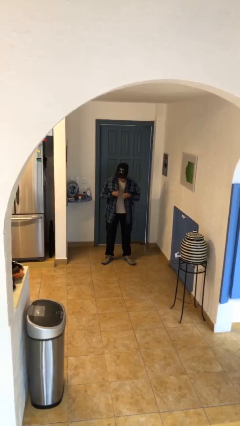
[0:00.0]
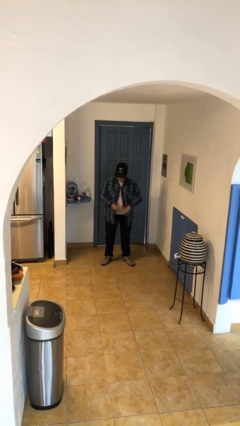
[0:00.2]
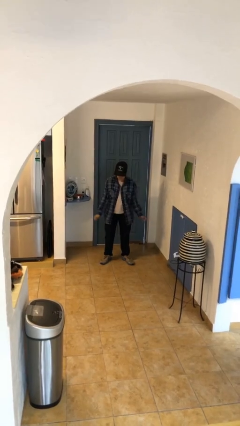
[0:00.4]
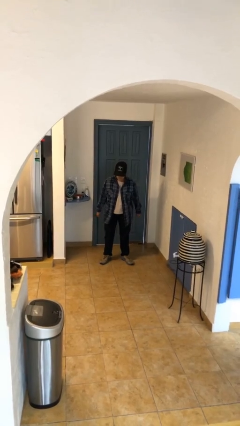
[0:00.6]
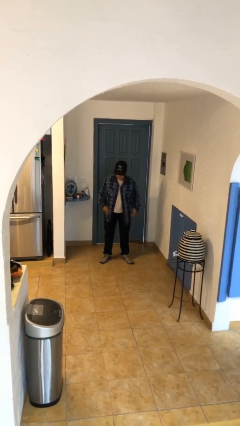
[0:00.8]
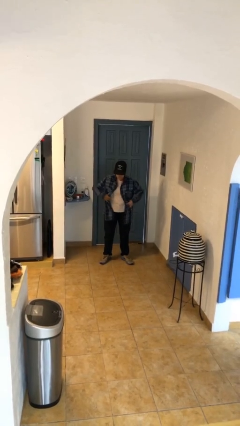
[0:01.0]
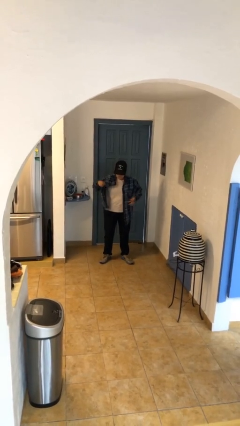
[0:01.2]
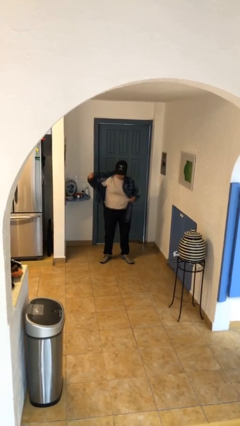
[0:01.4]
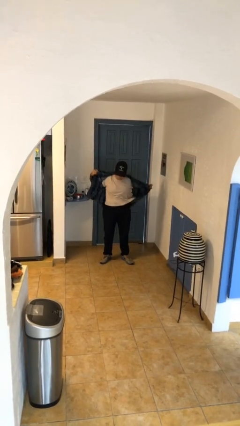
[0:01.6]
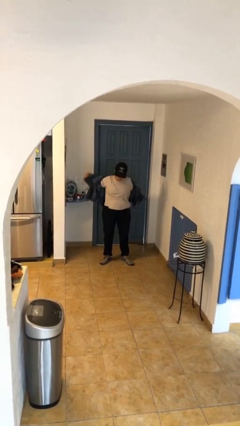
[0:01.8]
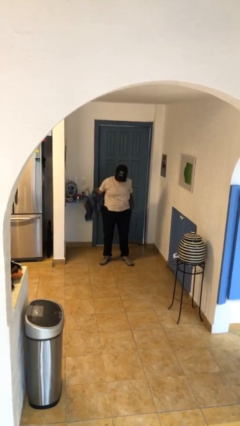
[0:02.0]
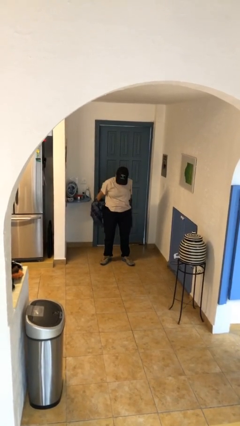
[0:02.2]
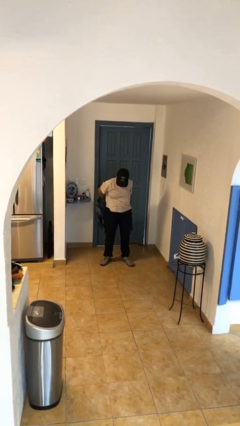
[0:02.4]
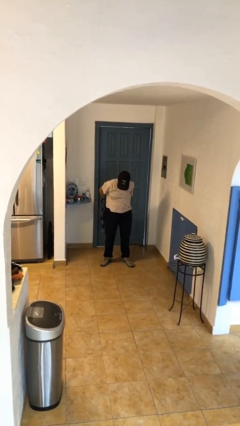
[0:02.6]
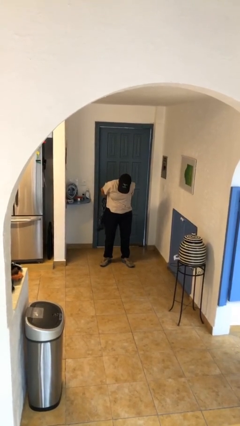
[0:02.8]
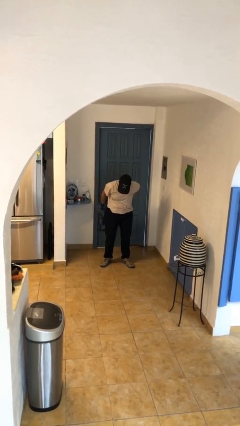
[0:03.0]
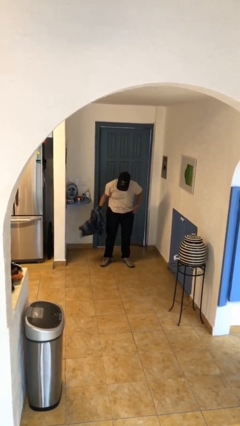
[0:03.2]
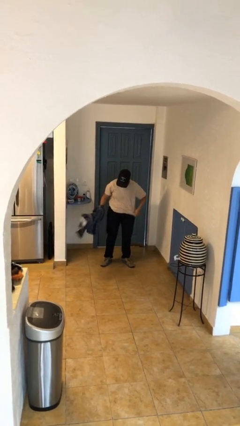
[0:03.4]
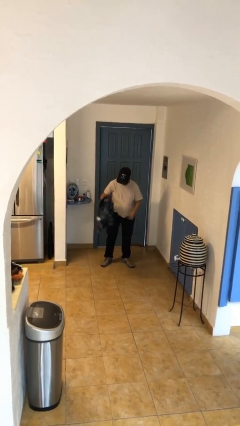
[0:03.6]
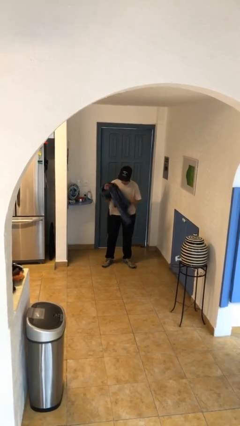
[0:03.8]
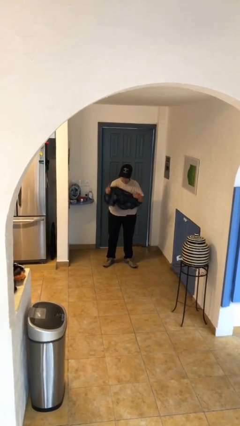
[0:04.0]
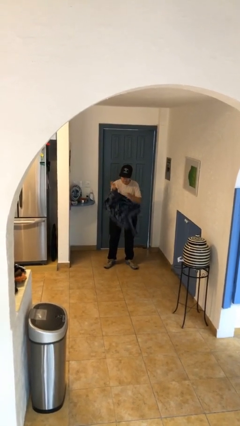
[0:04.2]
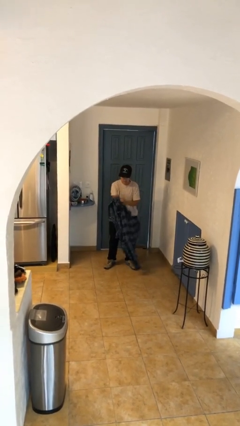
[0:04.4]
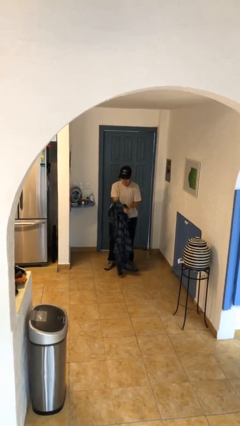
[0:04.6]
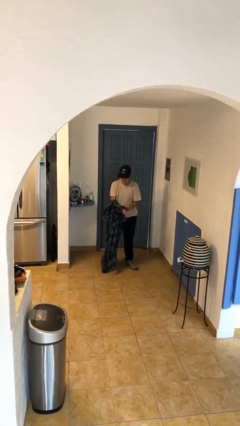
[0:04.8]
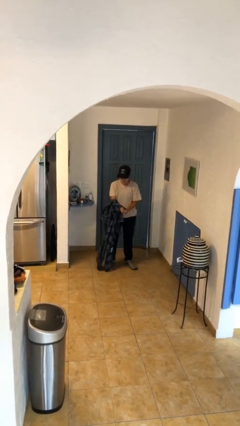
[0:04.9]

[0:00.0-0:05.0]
person takes off shirt

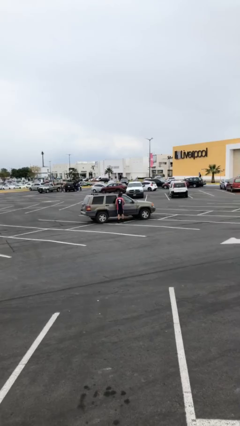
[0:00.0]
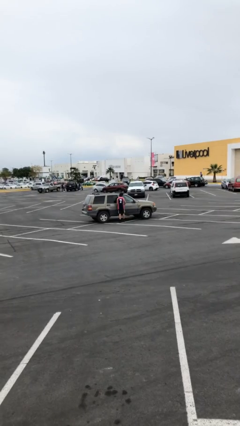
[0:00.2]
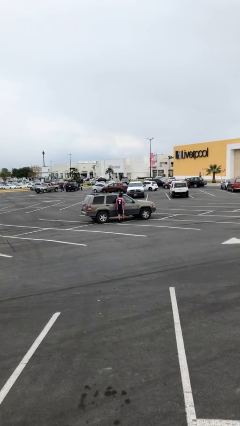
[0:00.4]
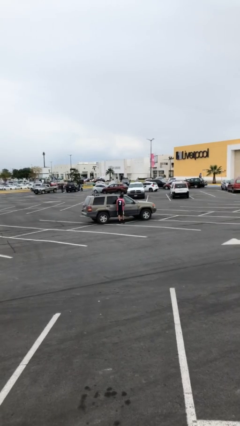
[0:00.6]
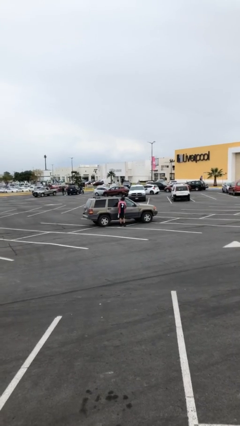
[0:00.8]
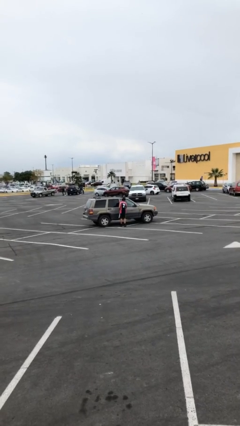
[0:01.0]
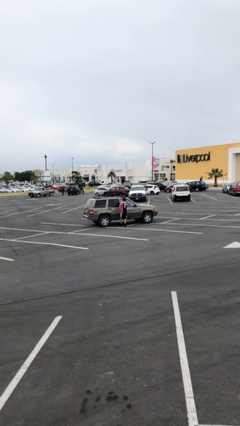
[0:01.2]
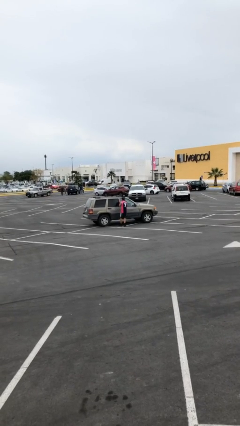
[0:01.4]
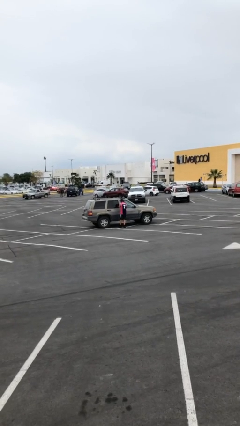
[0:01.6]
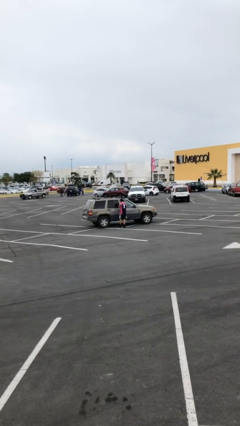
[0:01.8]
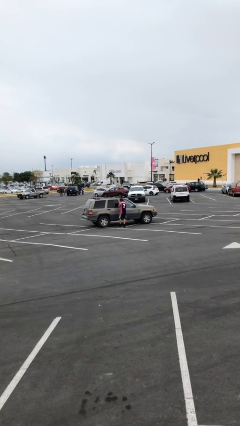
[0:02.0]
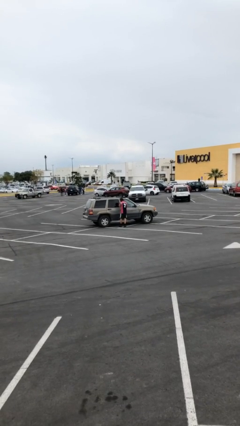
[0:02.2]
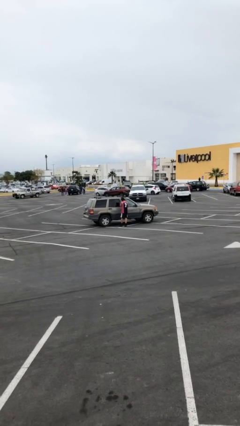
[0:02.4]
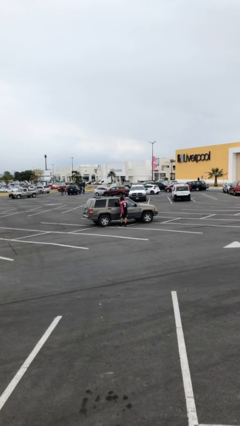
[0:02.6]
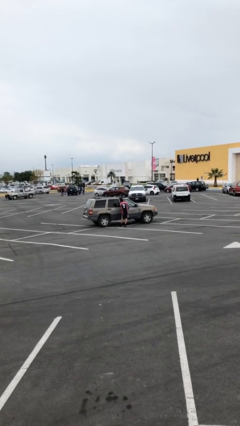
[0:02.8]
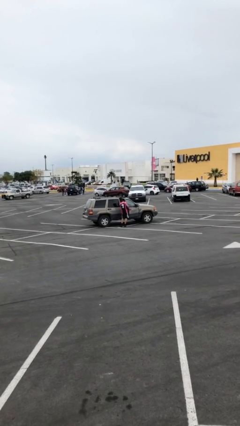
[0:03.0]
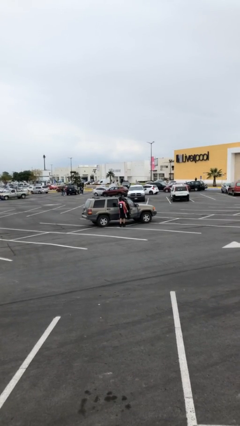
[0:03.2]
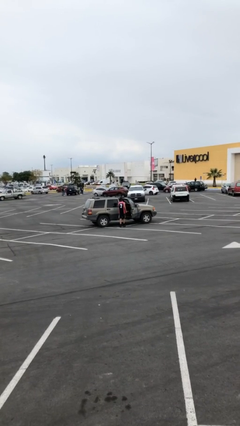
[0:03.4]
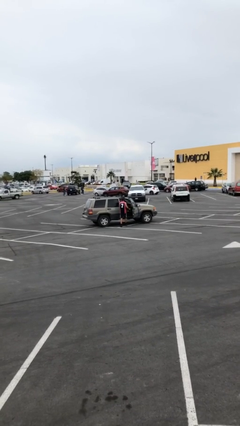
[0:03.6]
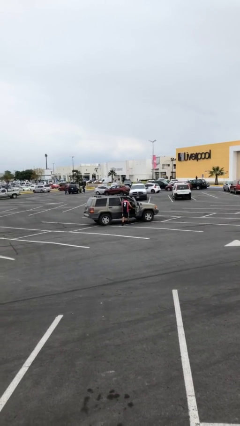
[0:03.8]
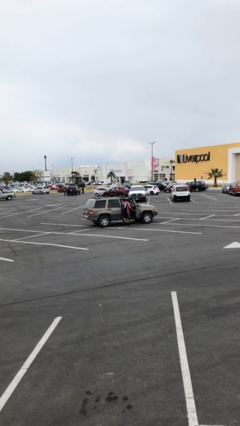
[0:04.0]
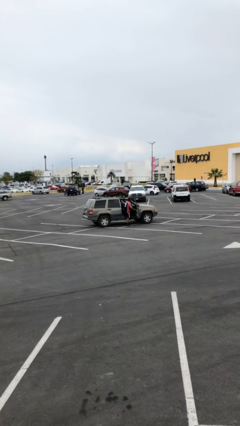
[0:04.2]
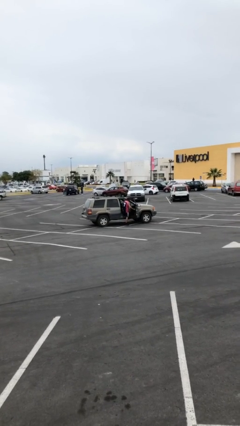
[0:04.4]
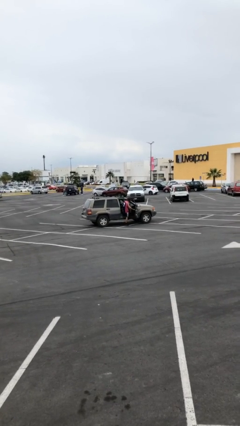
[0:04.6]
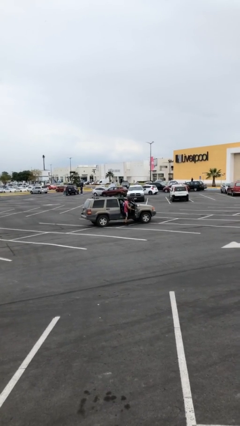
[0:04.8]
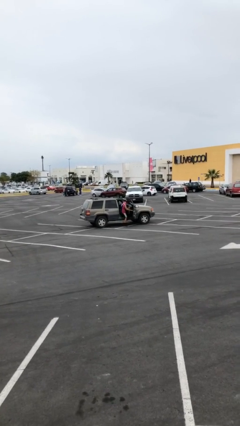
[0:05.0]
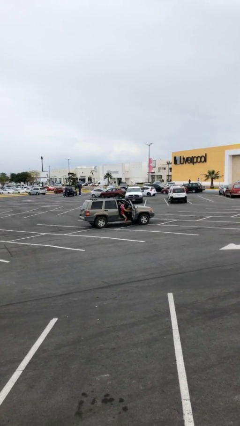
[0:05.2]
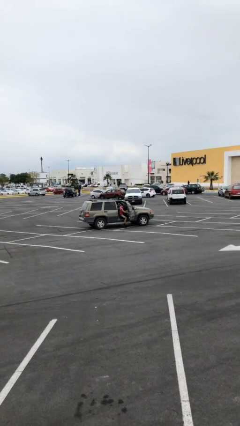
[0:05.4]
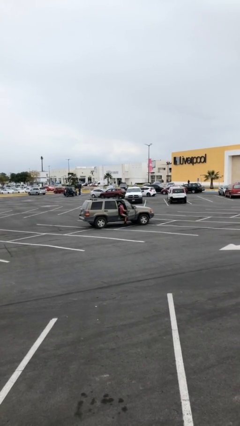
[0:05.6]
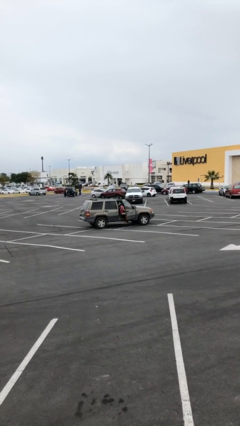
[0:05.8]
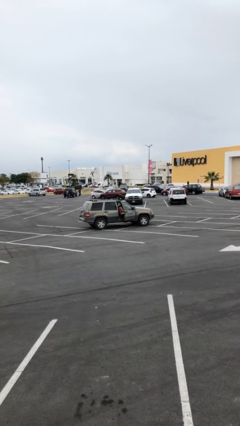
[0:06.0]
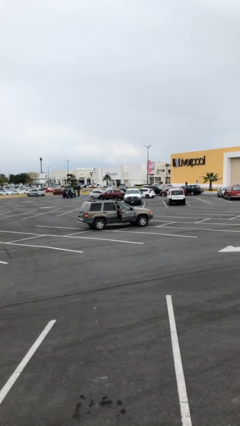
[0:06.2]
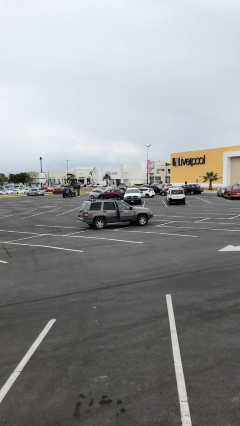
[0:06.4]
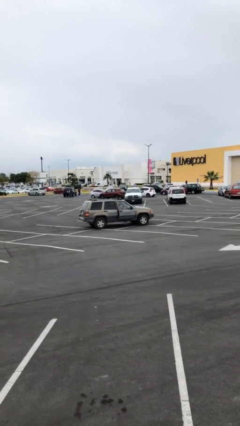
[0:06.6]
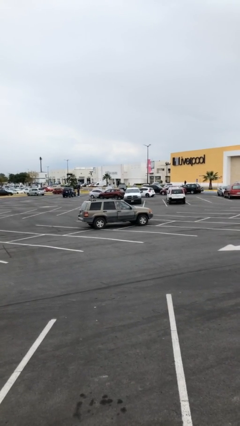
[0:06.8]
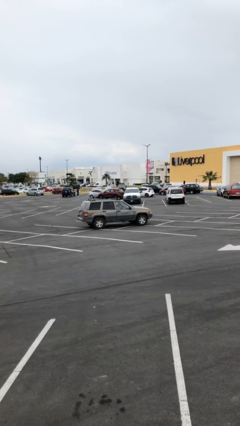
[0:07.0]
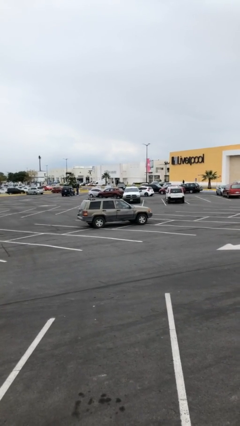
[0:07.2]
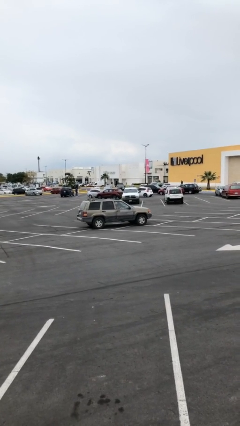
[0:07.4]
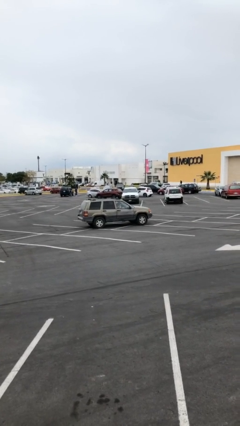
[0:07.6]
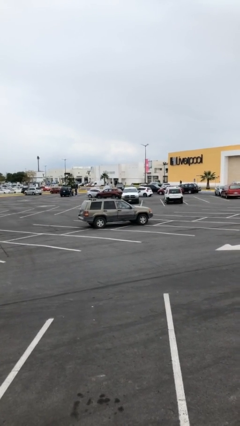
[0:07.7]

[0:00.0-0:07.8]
car picks up person

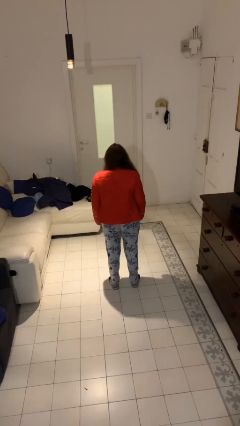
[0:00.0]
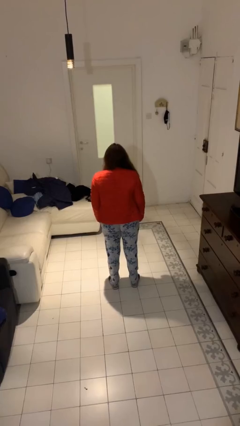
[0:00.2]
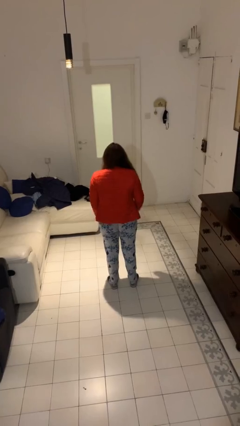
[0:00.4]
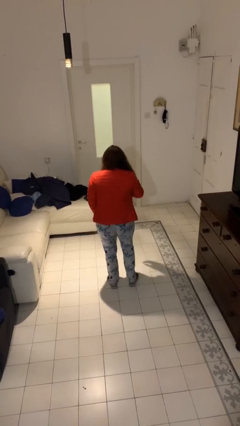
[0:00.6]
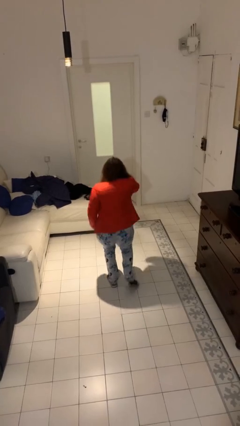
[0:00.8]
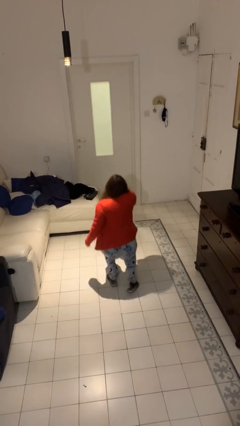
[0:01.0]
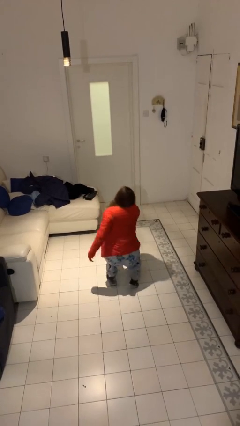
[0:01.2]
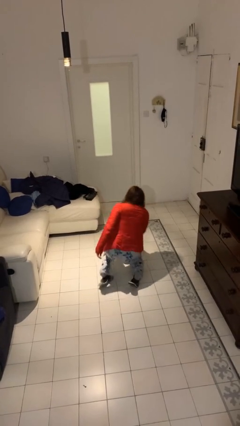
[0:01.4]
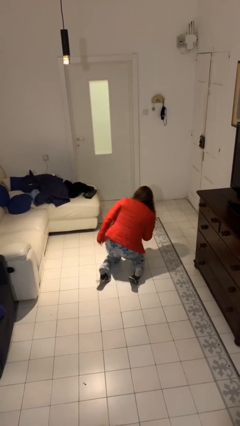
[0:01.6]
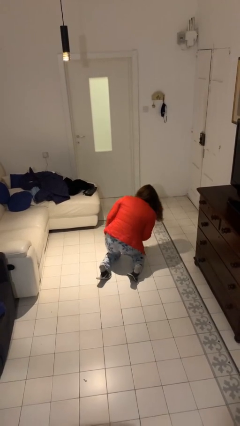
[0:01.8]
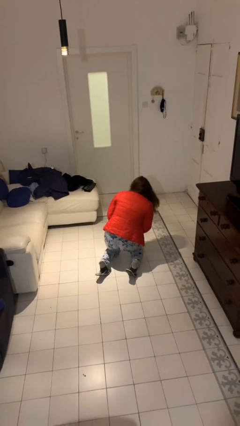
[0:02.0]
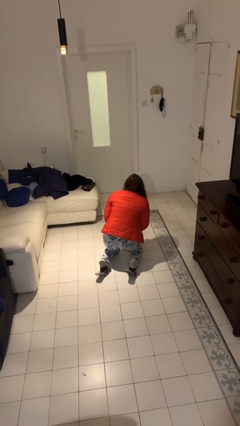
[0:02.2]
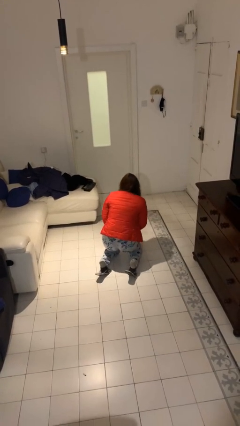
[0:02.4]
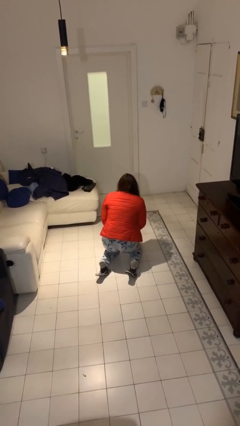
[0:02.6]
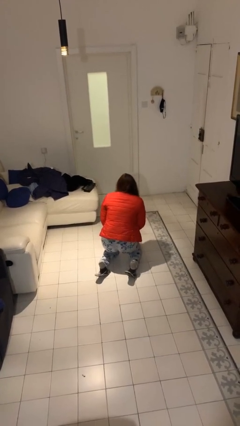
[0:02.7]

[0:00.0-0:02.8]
person falls while standing

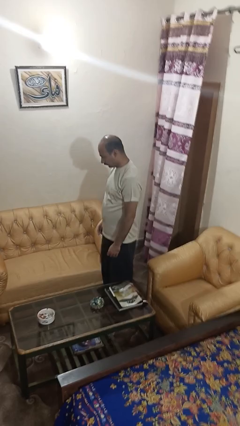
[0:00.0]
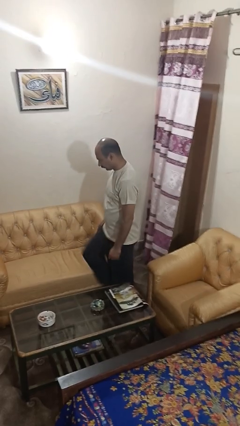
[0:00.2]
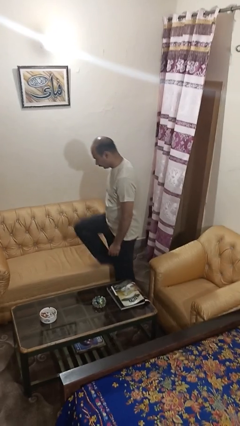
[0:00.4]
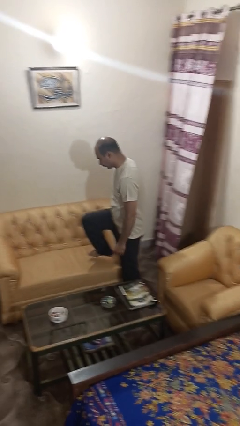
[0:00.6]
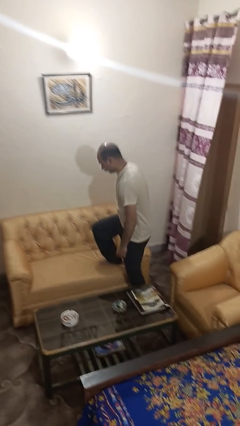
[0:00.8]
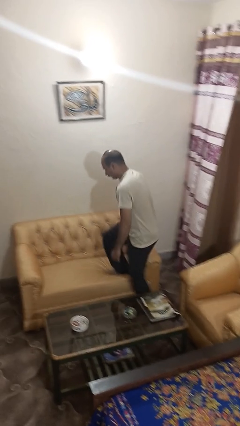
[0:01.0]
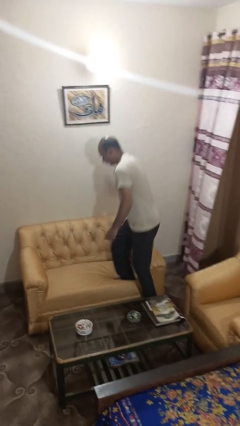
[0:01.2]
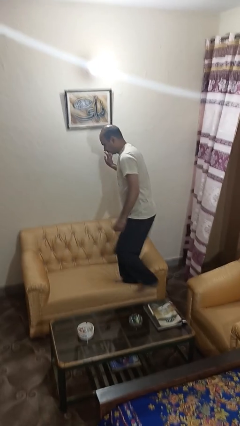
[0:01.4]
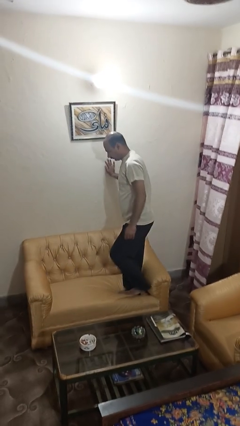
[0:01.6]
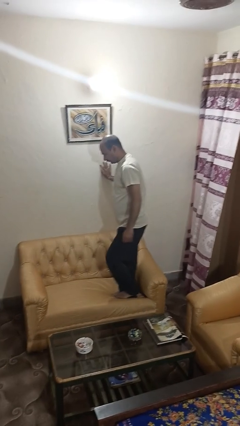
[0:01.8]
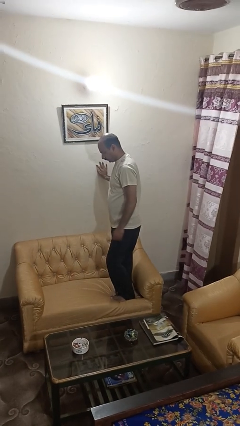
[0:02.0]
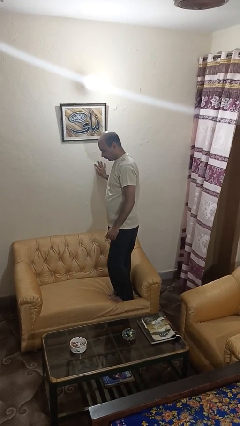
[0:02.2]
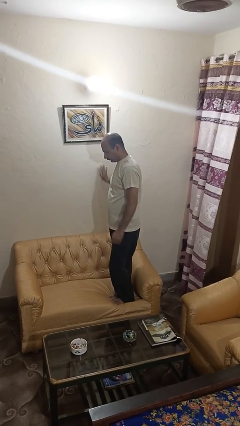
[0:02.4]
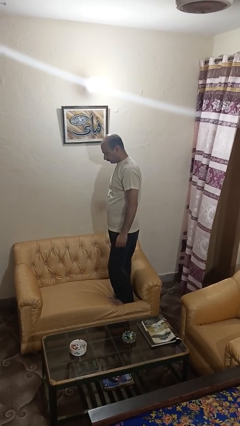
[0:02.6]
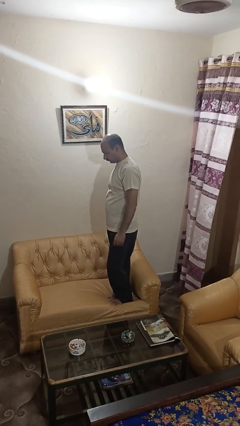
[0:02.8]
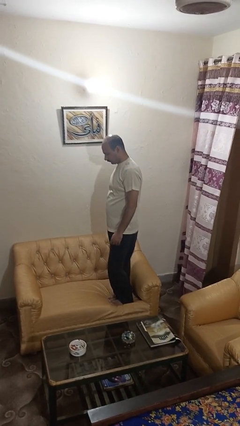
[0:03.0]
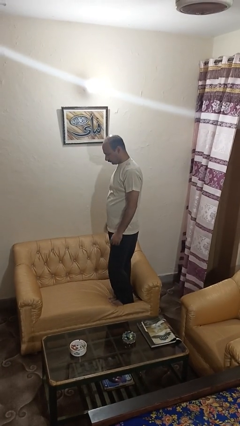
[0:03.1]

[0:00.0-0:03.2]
person climbs on couch
